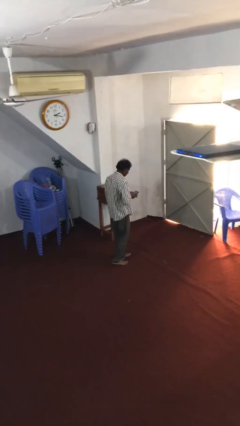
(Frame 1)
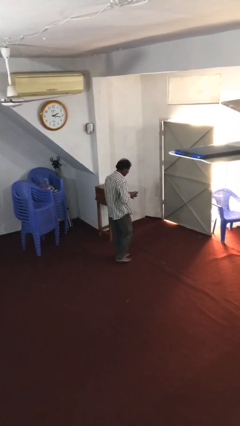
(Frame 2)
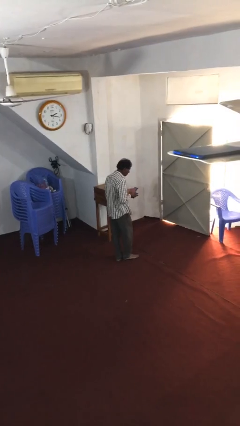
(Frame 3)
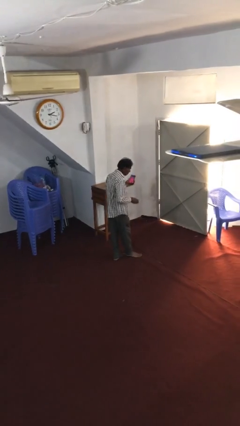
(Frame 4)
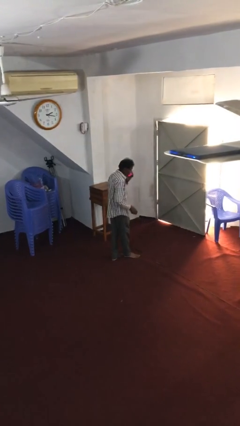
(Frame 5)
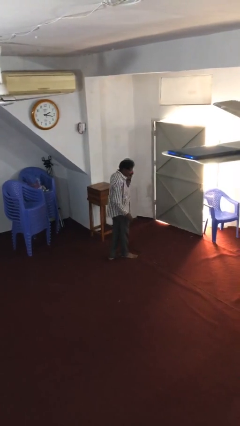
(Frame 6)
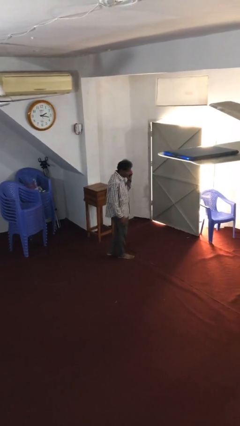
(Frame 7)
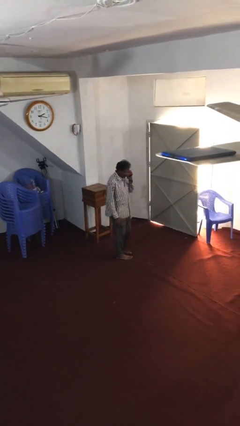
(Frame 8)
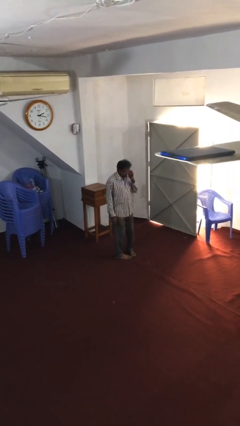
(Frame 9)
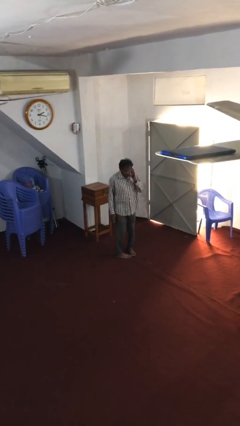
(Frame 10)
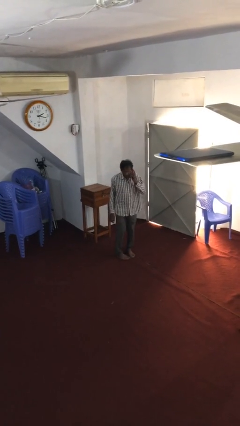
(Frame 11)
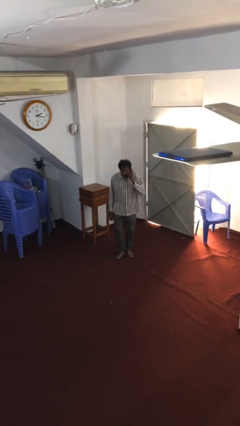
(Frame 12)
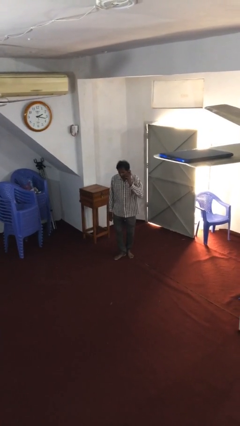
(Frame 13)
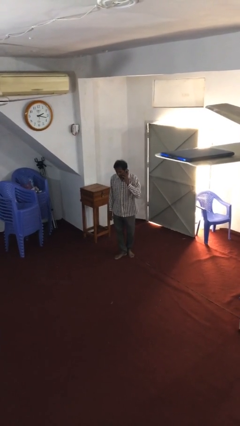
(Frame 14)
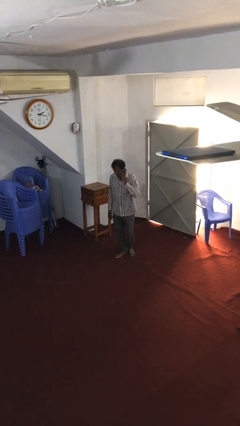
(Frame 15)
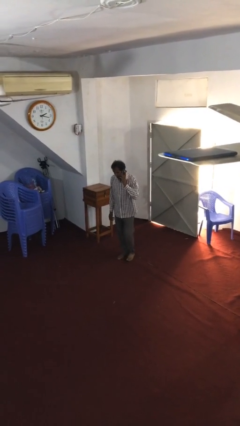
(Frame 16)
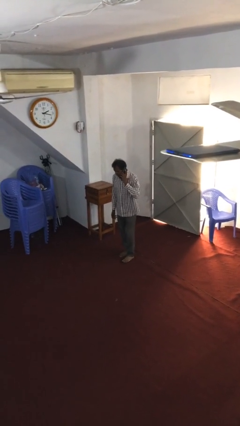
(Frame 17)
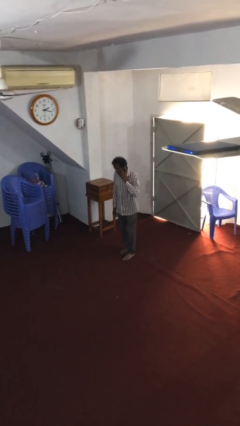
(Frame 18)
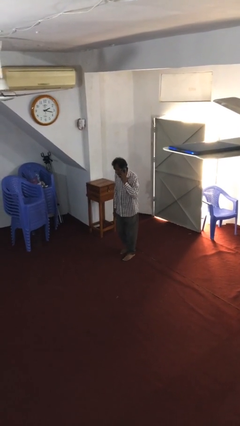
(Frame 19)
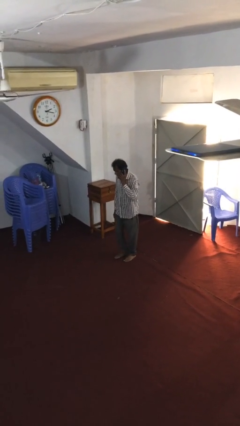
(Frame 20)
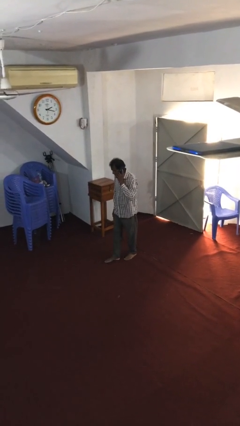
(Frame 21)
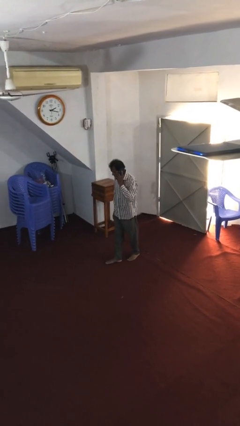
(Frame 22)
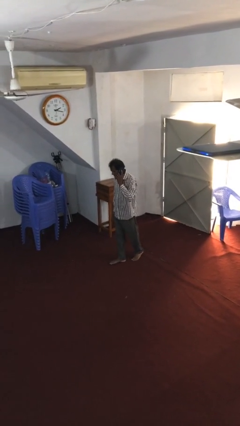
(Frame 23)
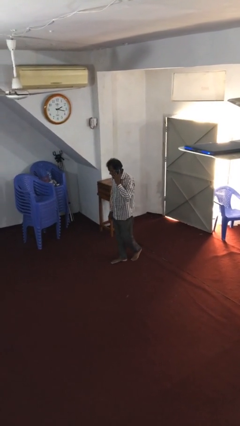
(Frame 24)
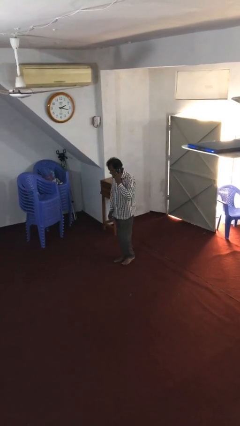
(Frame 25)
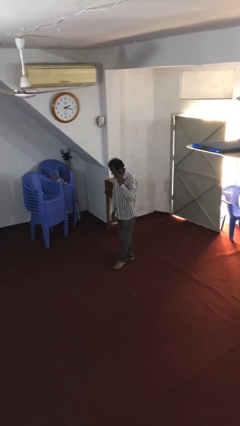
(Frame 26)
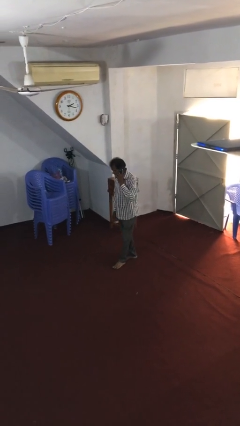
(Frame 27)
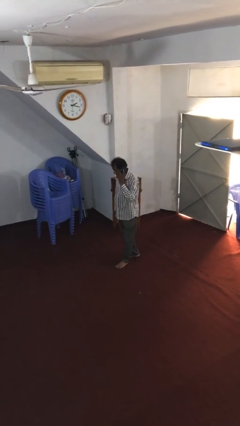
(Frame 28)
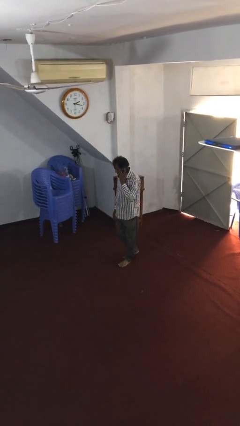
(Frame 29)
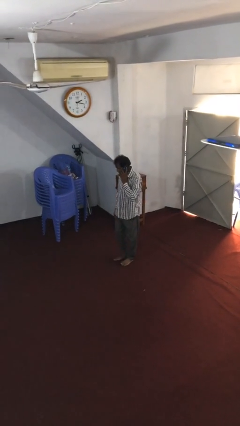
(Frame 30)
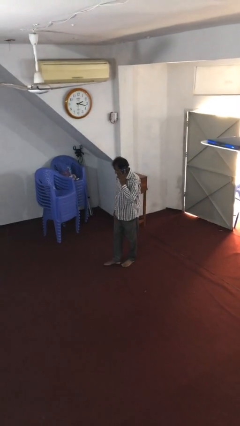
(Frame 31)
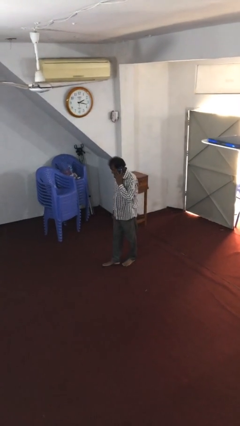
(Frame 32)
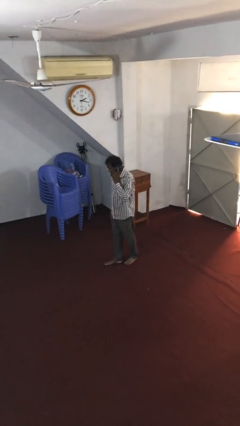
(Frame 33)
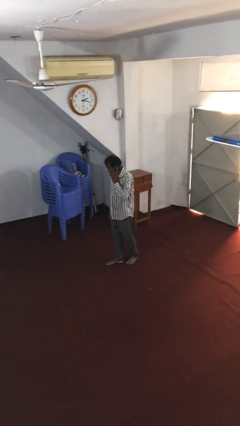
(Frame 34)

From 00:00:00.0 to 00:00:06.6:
person talks on phone

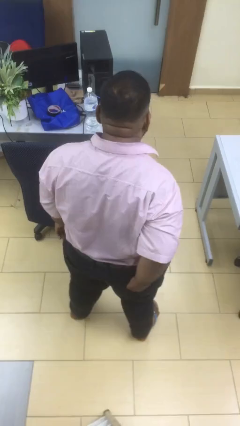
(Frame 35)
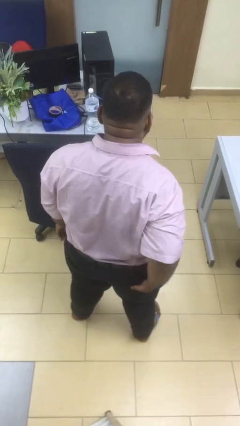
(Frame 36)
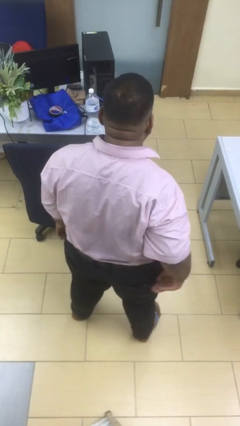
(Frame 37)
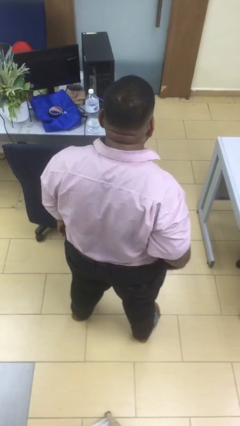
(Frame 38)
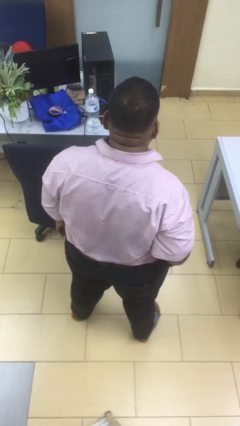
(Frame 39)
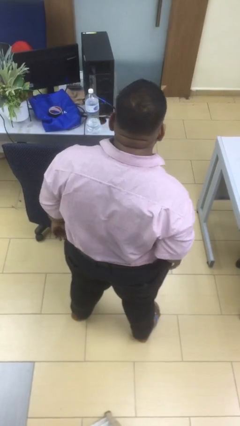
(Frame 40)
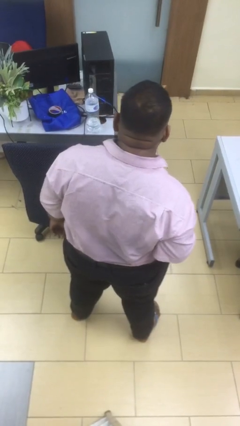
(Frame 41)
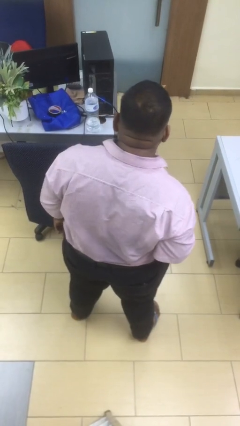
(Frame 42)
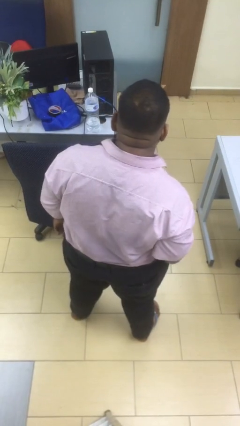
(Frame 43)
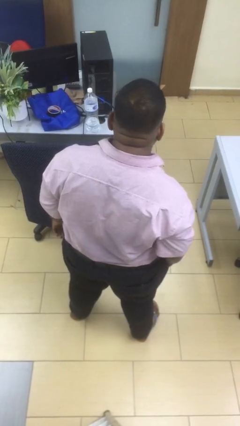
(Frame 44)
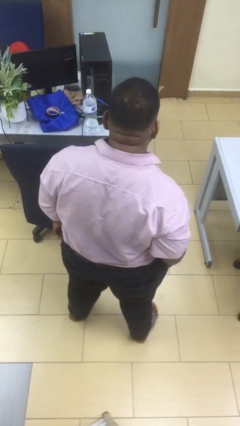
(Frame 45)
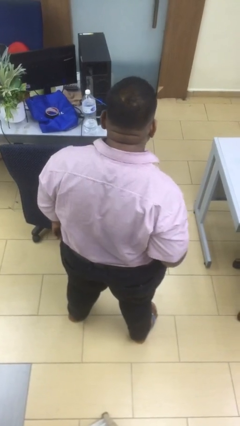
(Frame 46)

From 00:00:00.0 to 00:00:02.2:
person puts hands in back pockets

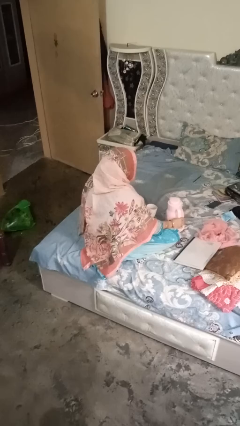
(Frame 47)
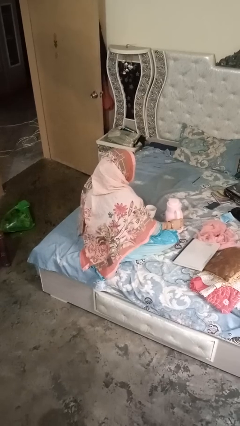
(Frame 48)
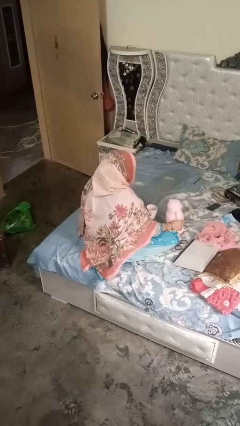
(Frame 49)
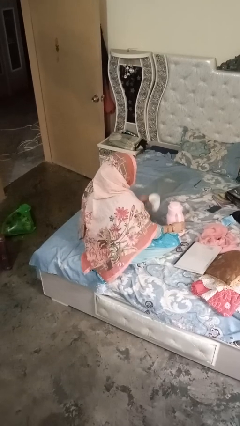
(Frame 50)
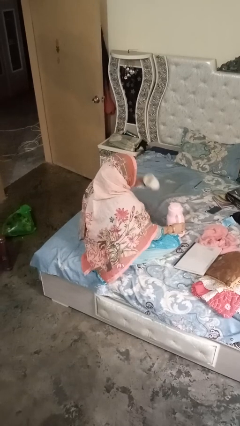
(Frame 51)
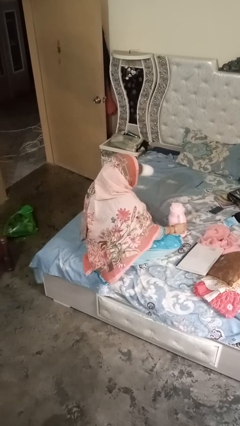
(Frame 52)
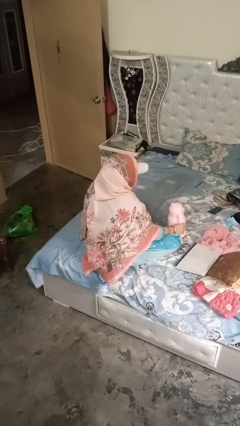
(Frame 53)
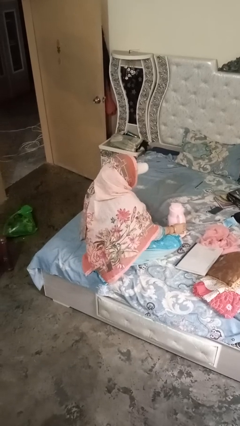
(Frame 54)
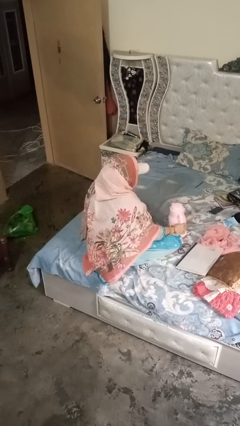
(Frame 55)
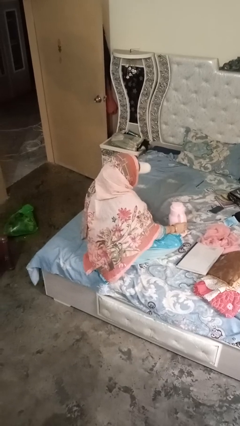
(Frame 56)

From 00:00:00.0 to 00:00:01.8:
person pours coffee into mug

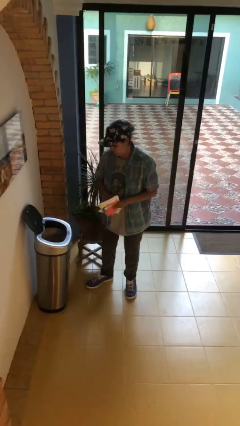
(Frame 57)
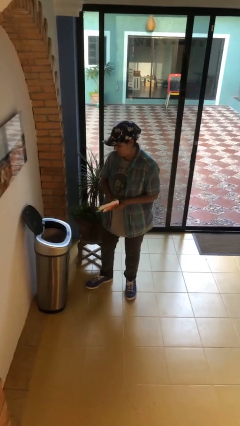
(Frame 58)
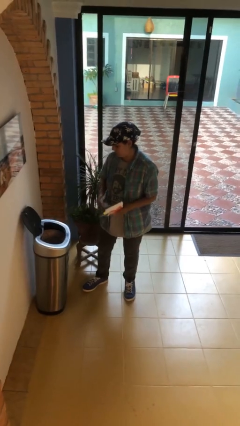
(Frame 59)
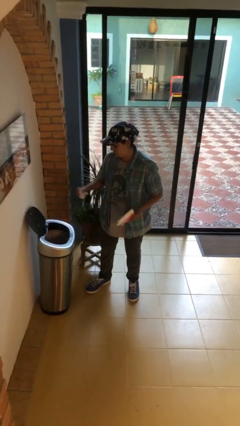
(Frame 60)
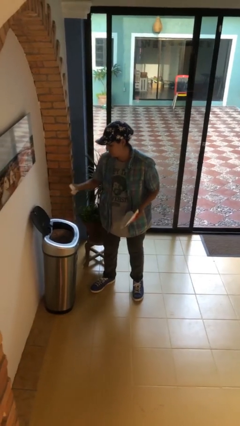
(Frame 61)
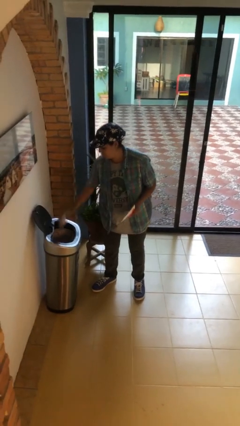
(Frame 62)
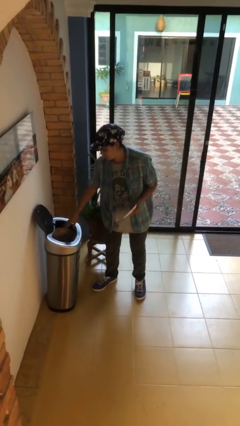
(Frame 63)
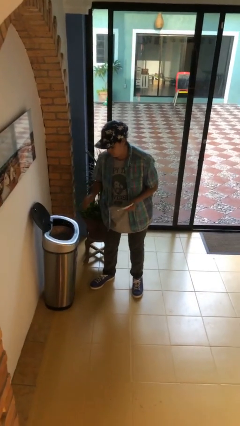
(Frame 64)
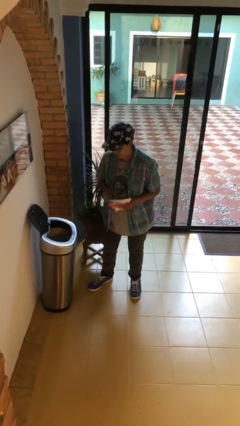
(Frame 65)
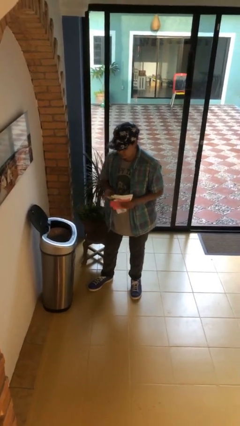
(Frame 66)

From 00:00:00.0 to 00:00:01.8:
person discards trash

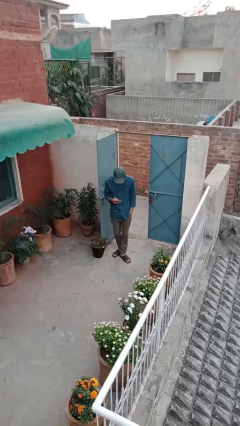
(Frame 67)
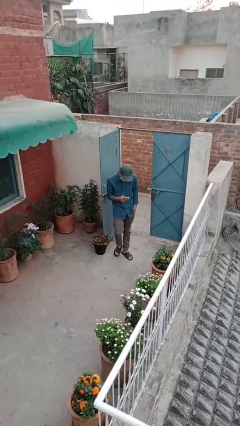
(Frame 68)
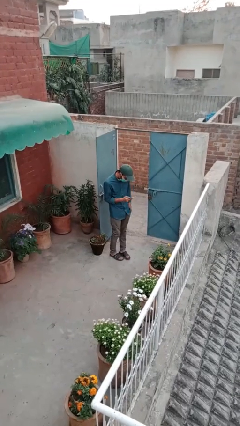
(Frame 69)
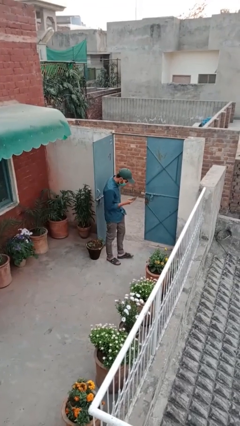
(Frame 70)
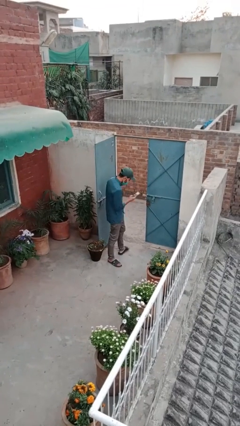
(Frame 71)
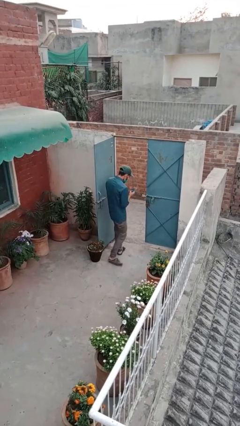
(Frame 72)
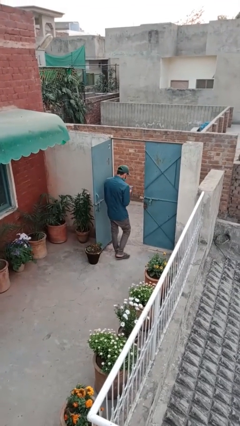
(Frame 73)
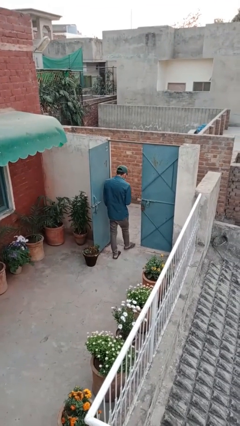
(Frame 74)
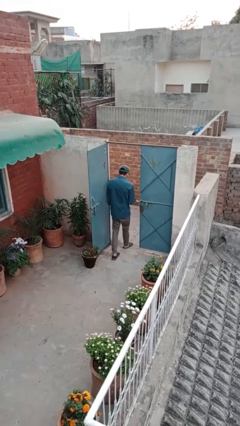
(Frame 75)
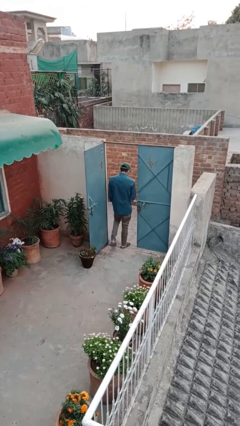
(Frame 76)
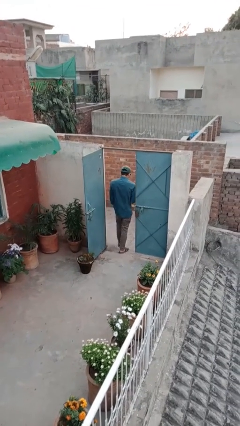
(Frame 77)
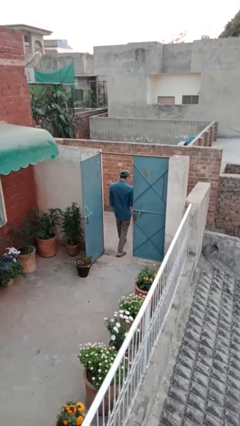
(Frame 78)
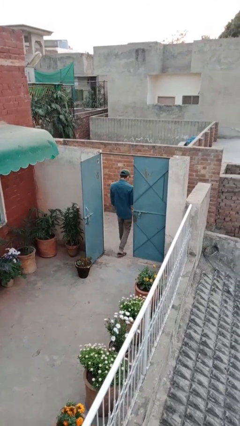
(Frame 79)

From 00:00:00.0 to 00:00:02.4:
person exits scene through structure

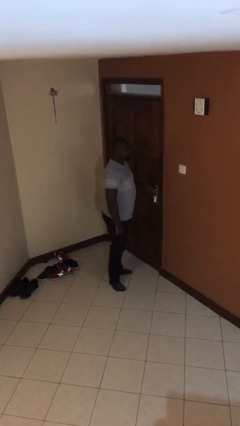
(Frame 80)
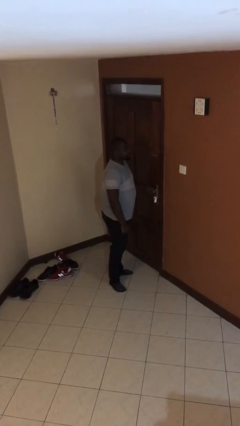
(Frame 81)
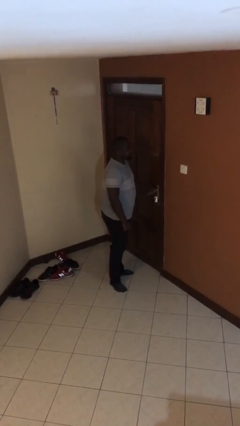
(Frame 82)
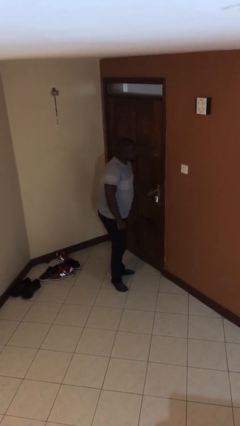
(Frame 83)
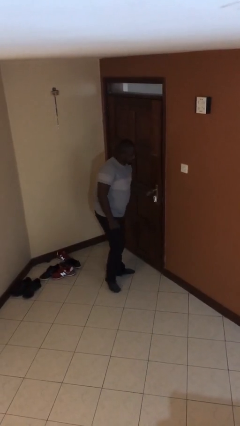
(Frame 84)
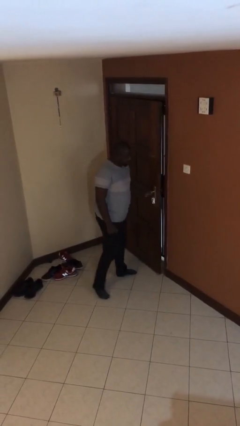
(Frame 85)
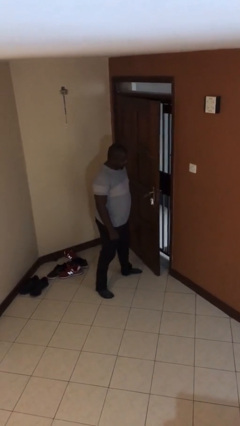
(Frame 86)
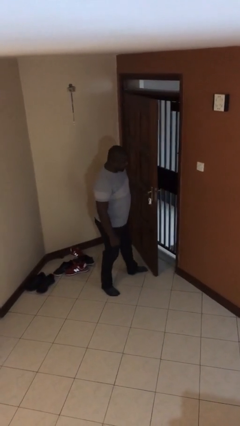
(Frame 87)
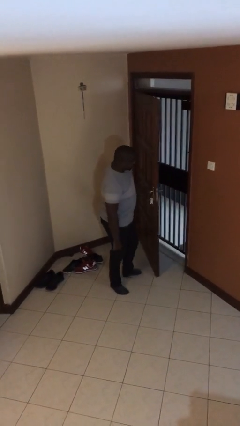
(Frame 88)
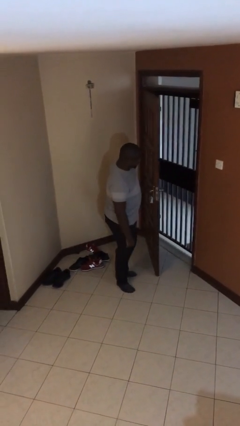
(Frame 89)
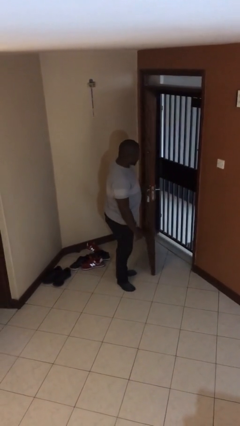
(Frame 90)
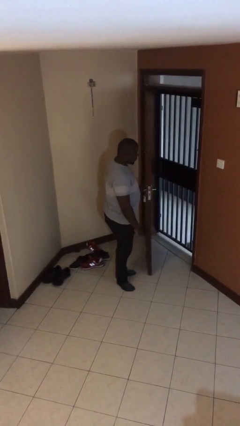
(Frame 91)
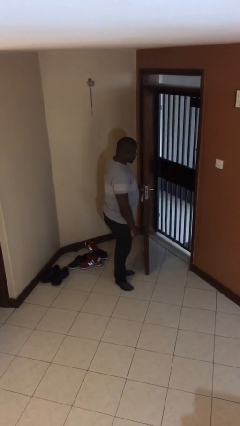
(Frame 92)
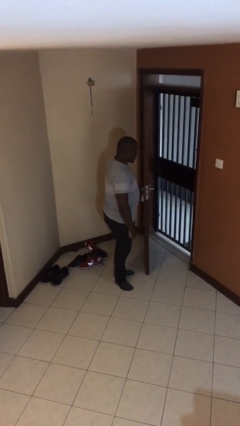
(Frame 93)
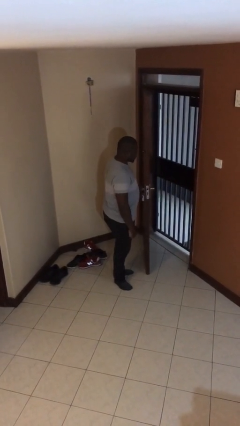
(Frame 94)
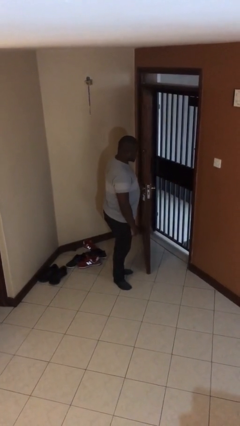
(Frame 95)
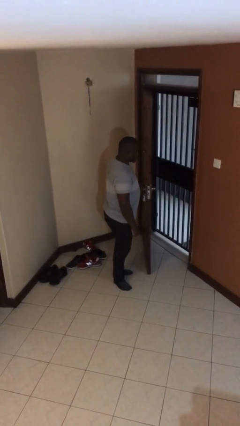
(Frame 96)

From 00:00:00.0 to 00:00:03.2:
person opens facility door
